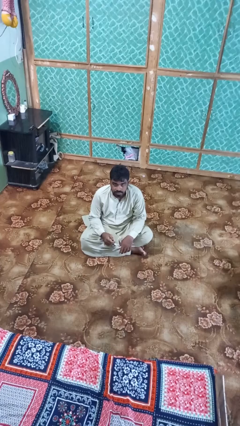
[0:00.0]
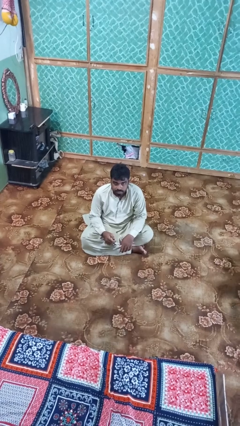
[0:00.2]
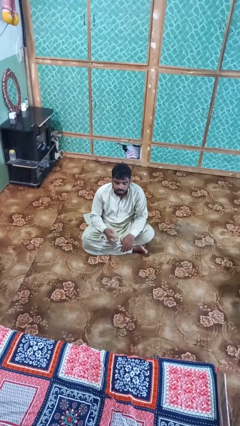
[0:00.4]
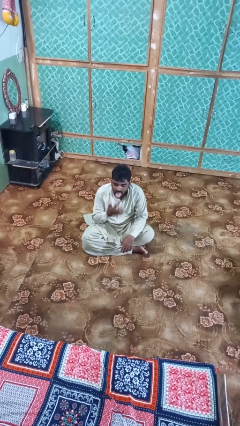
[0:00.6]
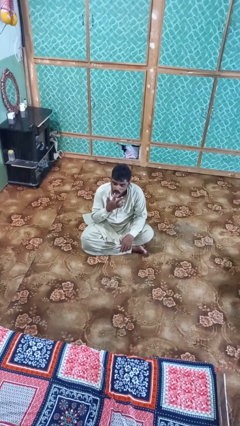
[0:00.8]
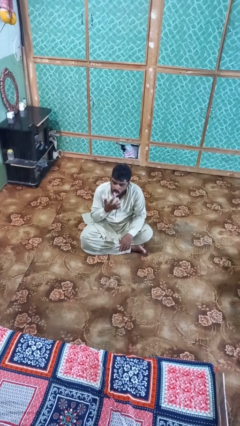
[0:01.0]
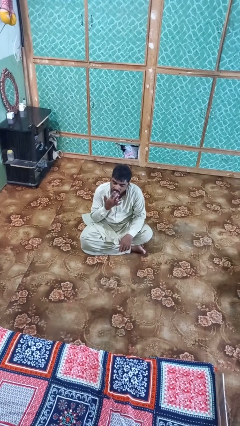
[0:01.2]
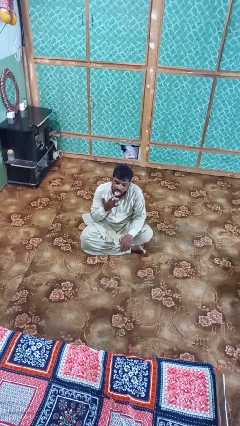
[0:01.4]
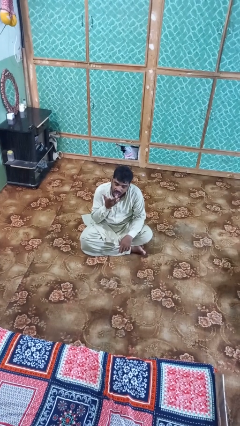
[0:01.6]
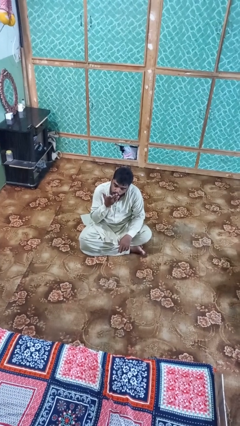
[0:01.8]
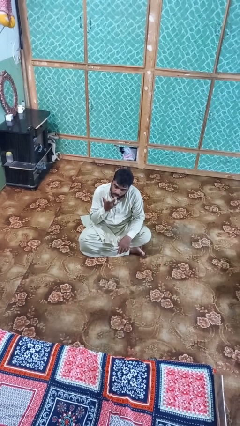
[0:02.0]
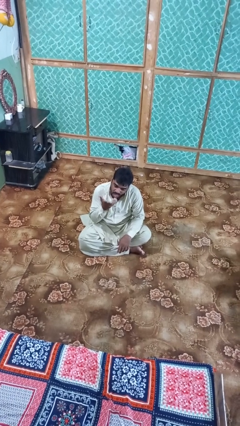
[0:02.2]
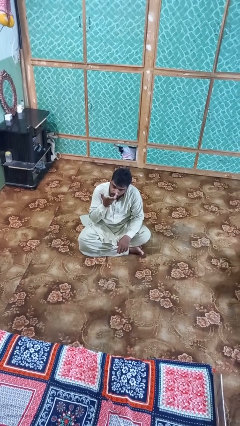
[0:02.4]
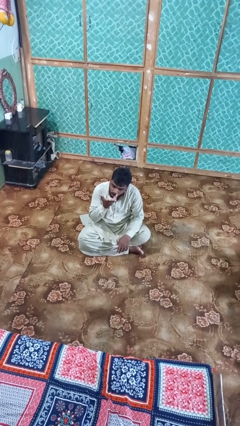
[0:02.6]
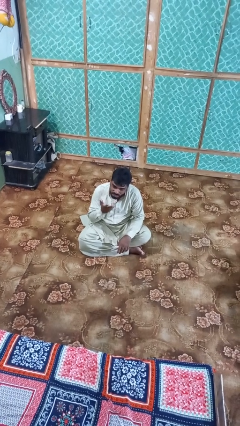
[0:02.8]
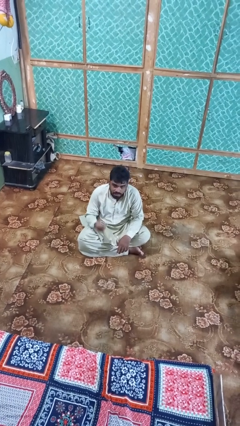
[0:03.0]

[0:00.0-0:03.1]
person licks fingers

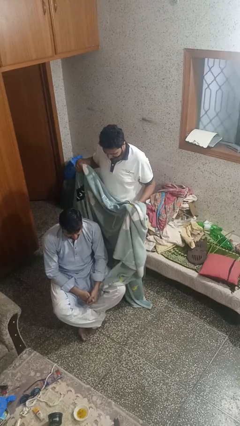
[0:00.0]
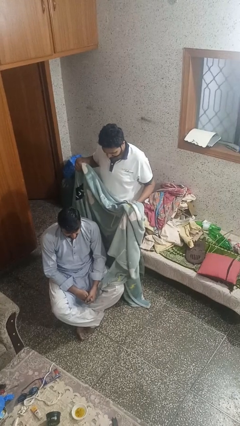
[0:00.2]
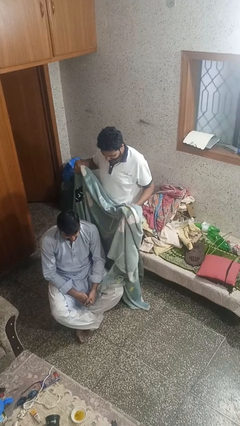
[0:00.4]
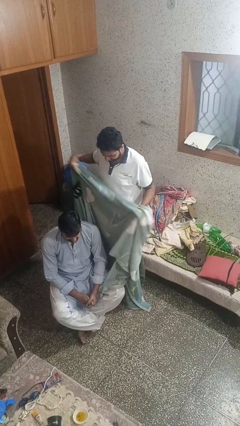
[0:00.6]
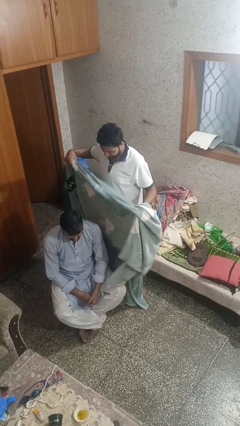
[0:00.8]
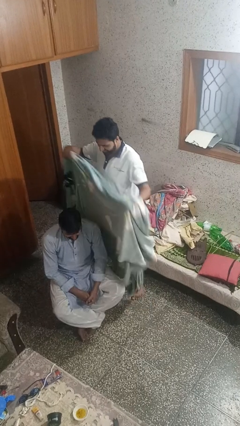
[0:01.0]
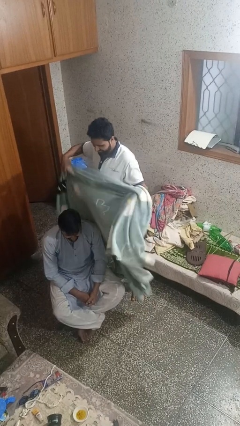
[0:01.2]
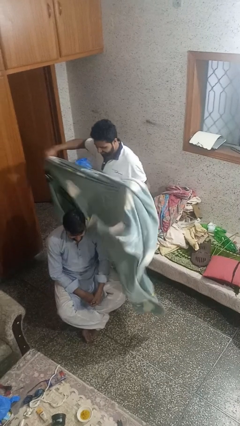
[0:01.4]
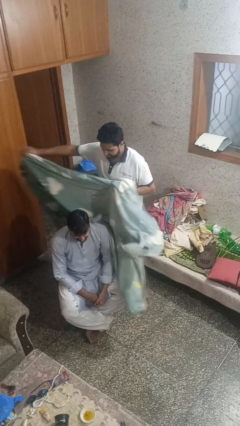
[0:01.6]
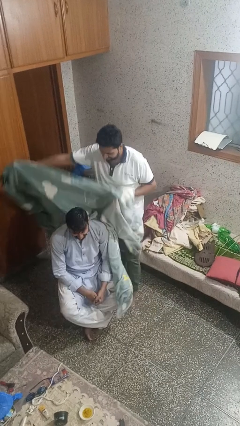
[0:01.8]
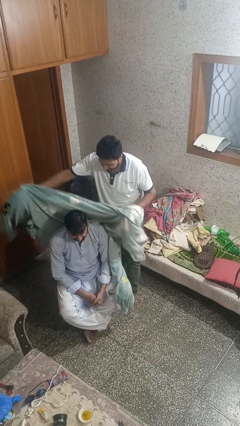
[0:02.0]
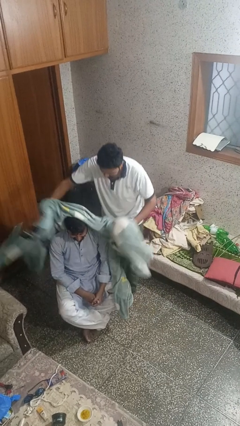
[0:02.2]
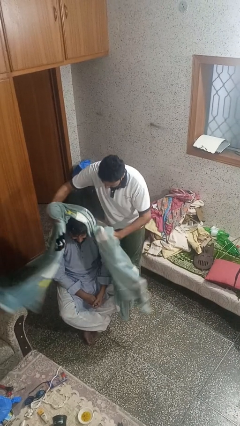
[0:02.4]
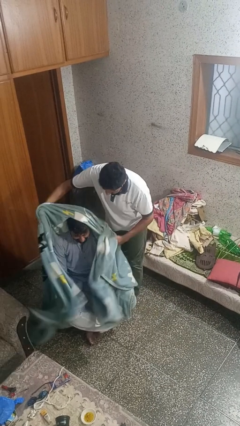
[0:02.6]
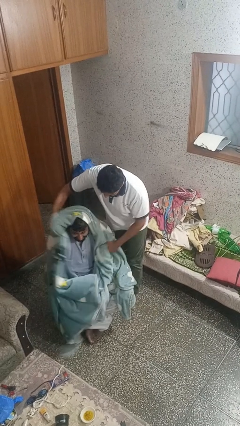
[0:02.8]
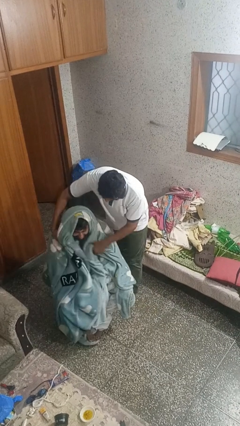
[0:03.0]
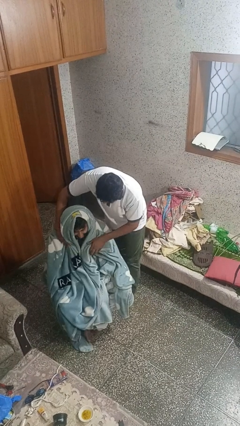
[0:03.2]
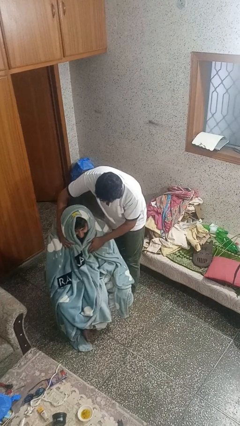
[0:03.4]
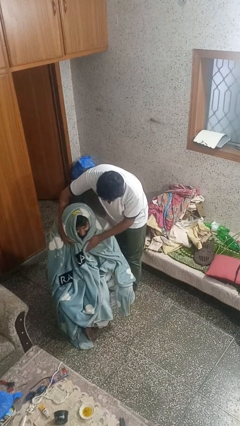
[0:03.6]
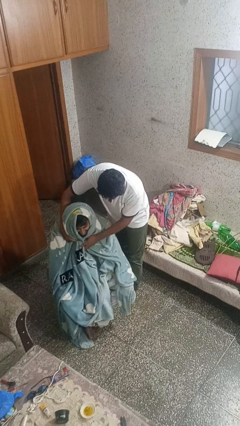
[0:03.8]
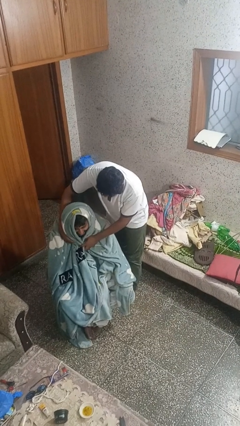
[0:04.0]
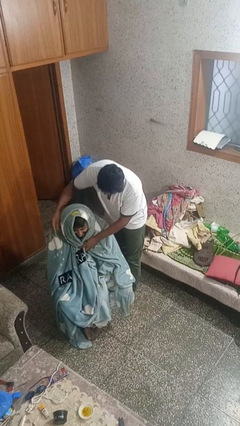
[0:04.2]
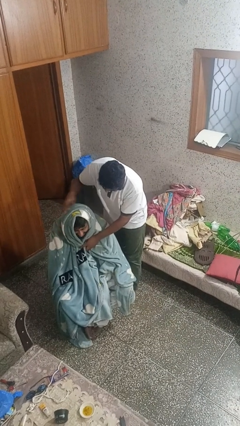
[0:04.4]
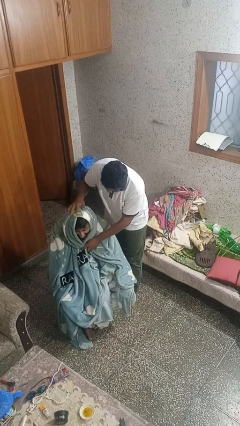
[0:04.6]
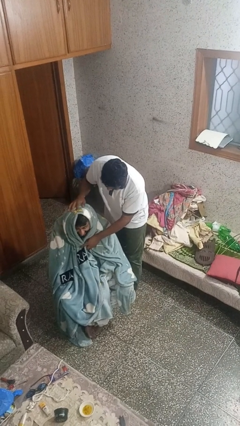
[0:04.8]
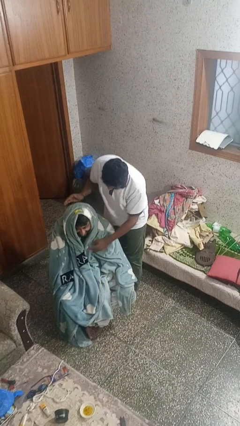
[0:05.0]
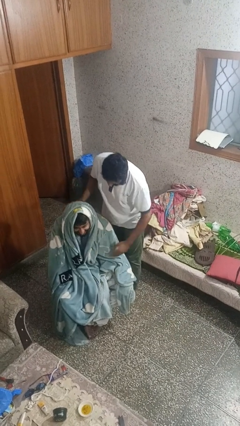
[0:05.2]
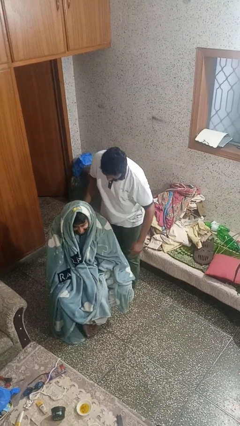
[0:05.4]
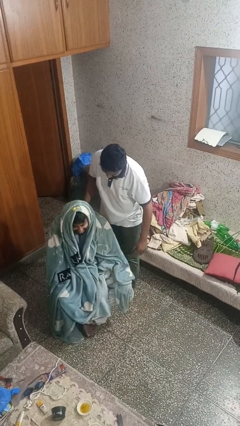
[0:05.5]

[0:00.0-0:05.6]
person covers friend with blanket

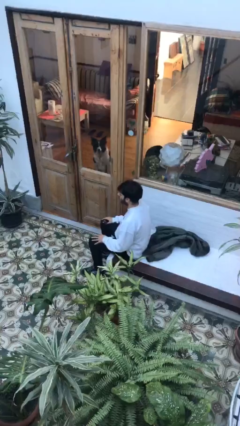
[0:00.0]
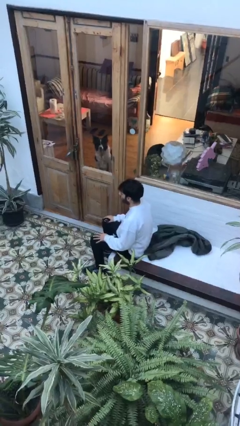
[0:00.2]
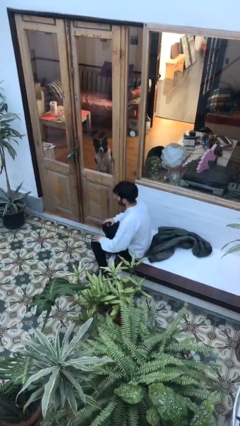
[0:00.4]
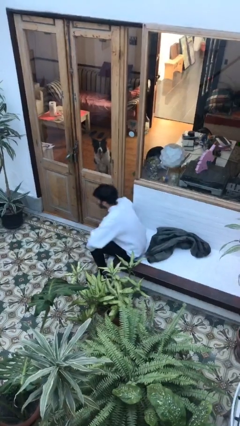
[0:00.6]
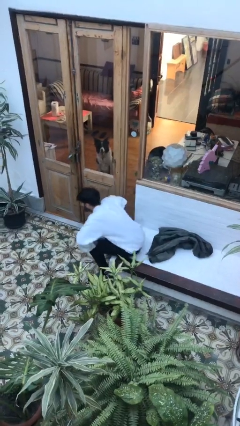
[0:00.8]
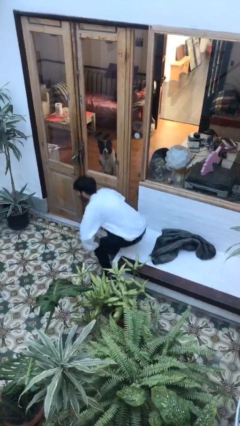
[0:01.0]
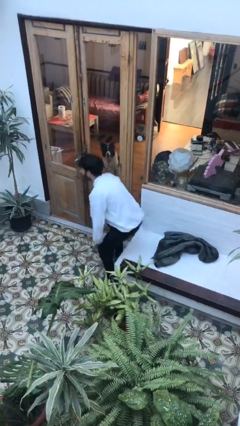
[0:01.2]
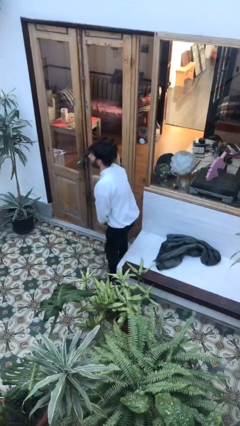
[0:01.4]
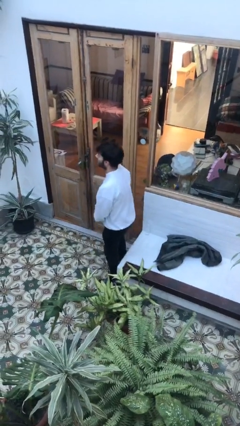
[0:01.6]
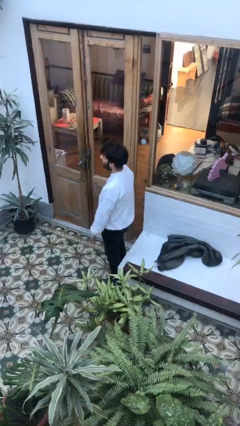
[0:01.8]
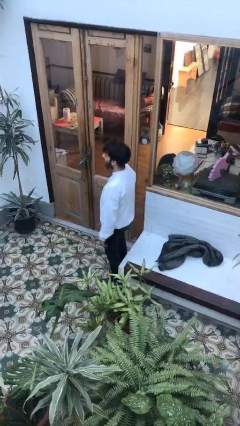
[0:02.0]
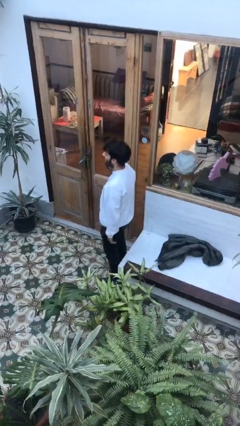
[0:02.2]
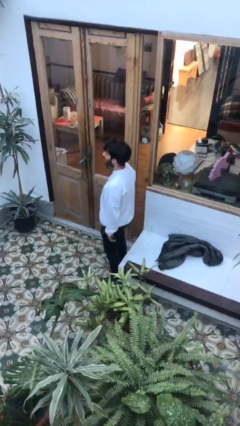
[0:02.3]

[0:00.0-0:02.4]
person stands up

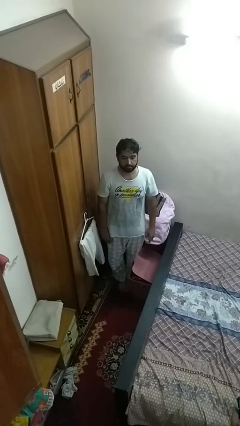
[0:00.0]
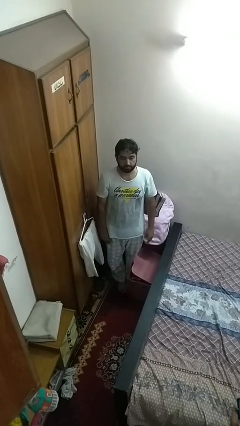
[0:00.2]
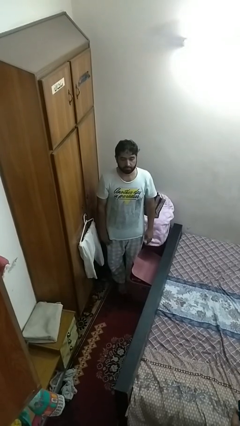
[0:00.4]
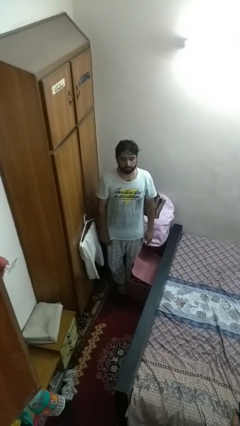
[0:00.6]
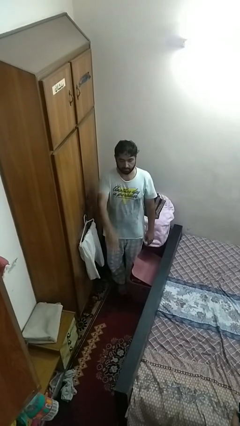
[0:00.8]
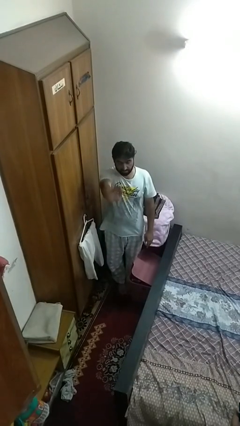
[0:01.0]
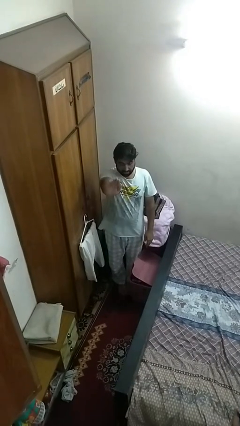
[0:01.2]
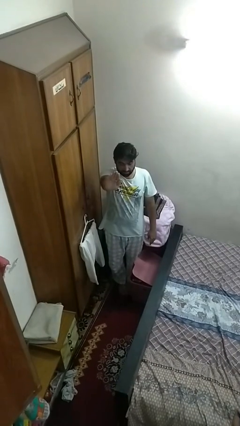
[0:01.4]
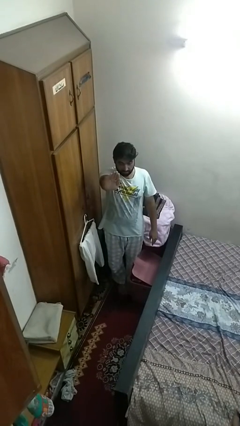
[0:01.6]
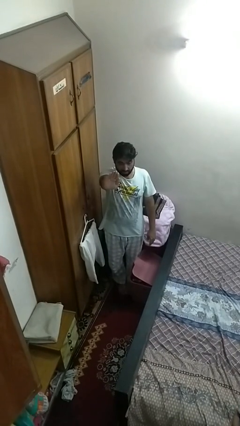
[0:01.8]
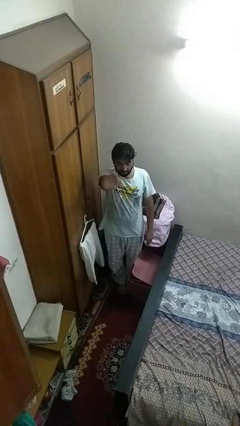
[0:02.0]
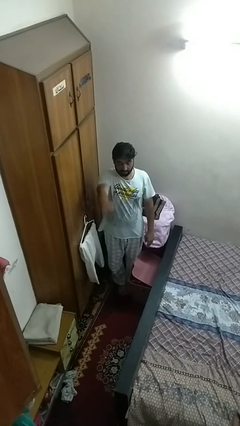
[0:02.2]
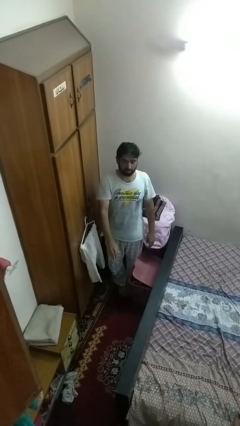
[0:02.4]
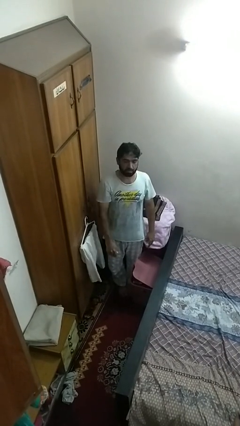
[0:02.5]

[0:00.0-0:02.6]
person gestures stop

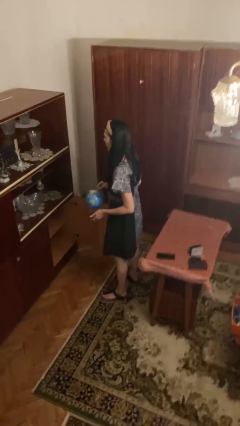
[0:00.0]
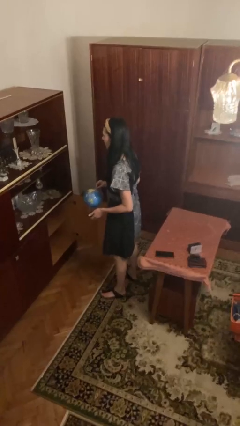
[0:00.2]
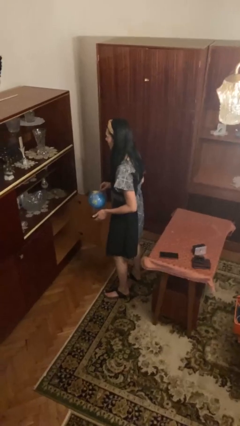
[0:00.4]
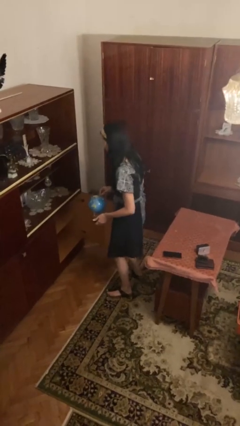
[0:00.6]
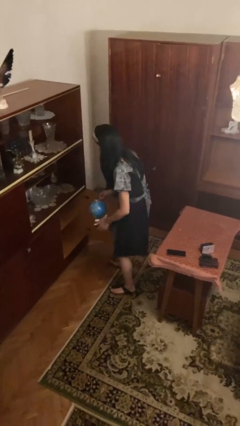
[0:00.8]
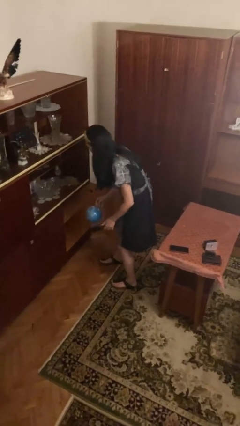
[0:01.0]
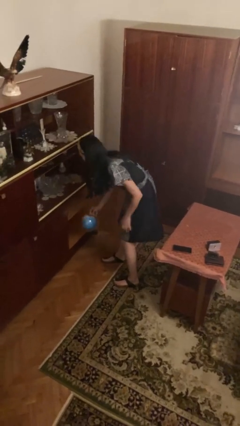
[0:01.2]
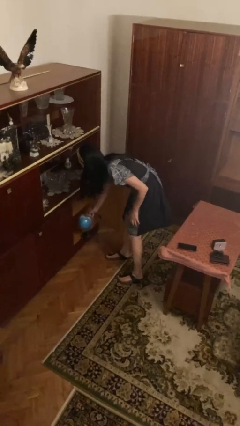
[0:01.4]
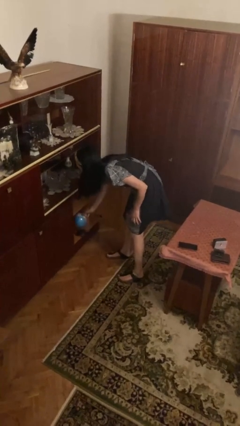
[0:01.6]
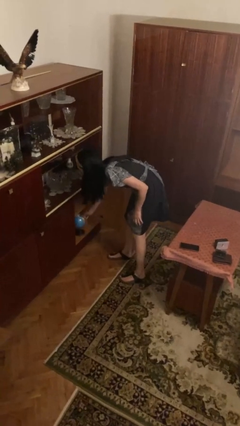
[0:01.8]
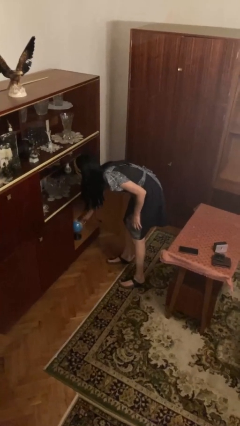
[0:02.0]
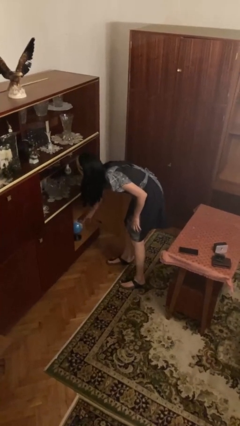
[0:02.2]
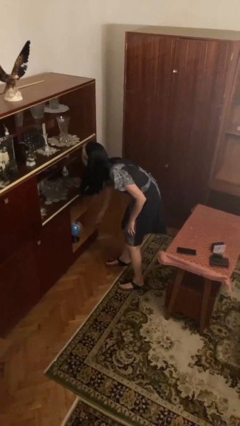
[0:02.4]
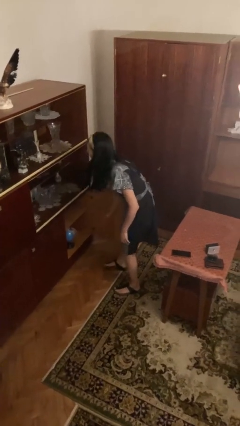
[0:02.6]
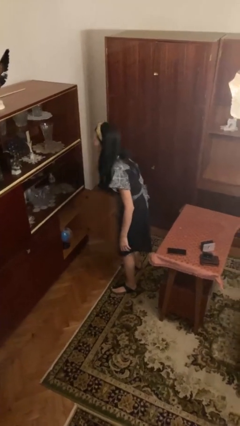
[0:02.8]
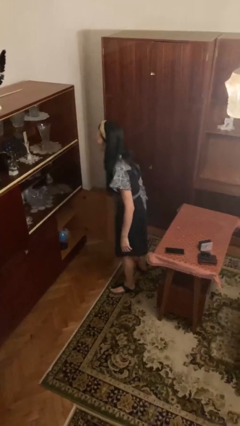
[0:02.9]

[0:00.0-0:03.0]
person puts down object into cabinet

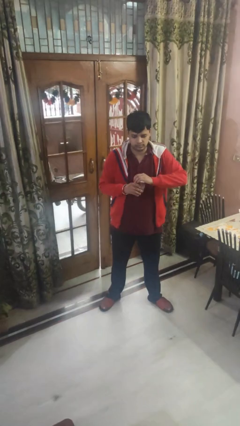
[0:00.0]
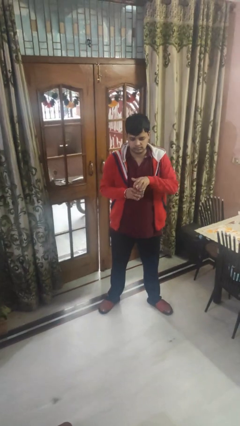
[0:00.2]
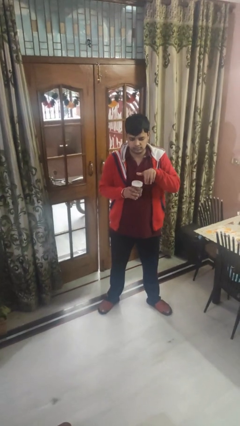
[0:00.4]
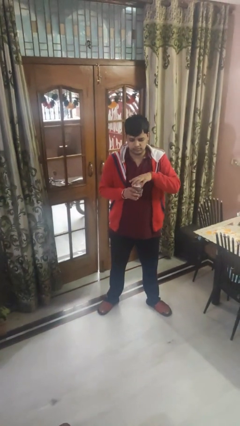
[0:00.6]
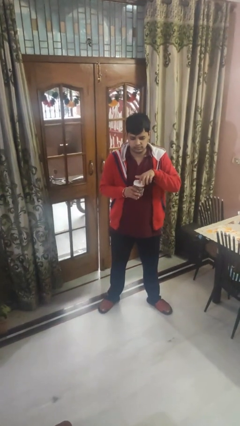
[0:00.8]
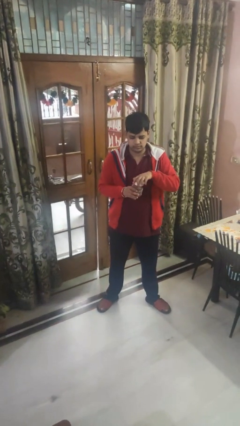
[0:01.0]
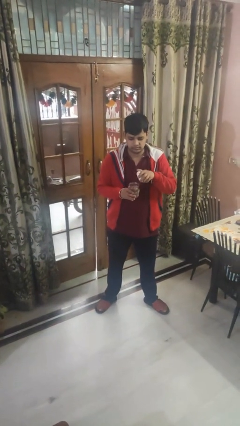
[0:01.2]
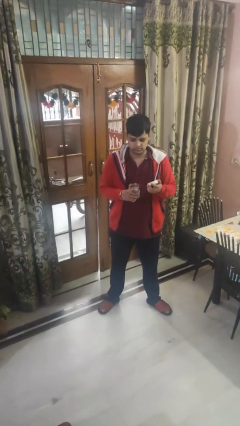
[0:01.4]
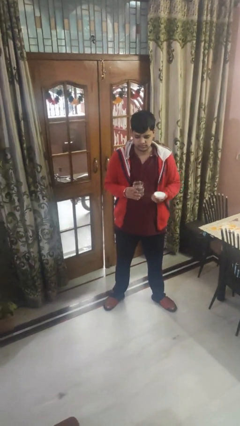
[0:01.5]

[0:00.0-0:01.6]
person opens jar
